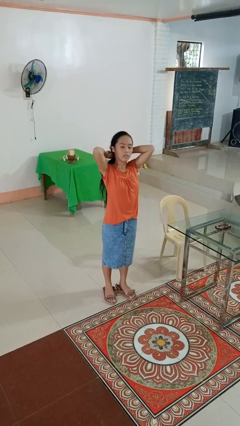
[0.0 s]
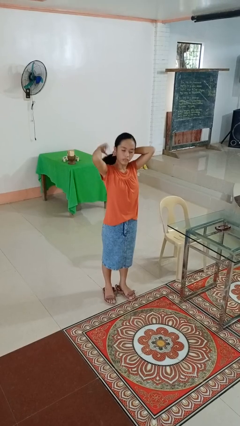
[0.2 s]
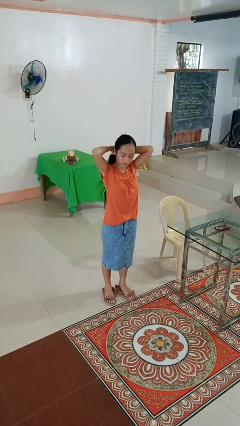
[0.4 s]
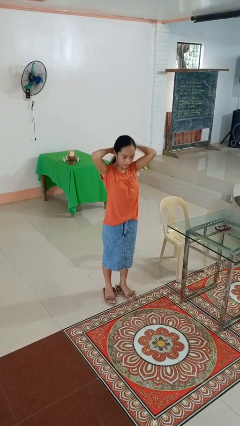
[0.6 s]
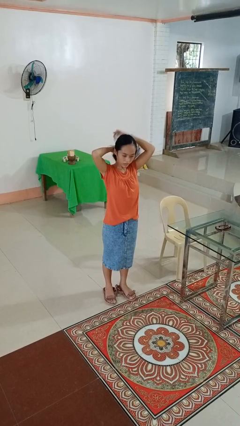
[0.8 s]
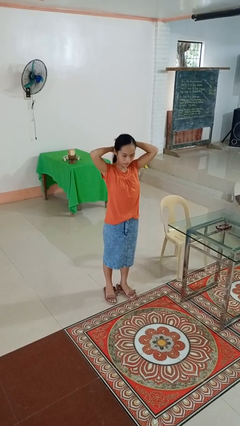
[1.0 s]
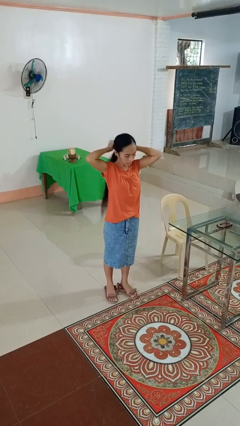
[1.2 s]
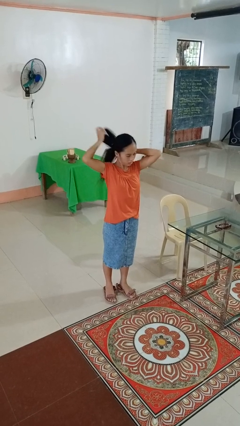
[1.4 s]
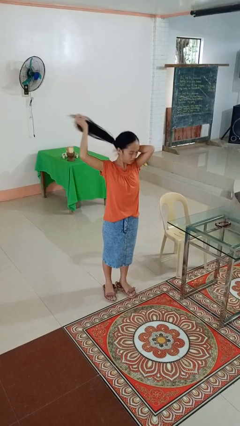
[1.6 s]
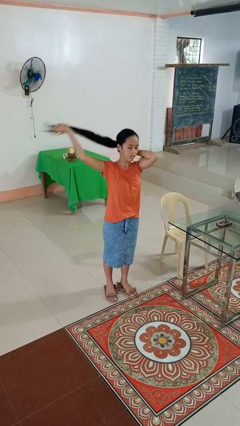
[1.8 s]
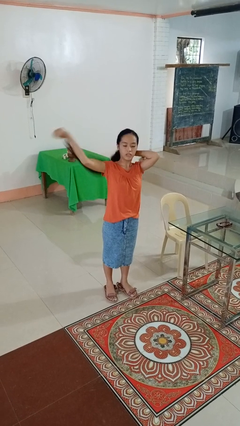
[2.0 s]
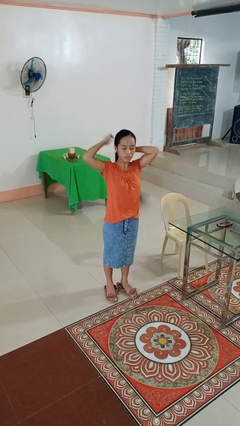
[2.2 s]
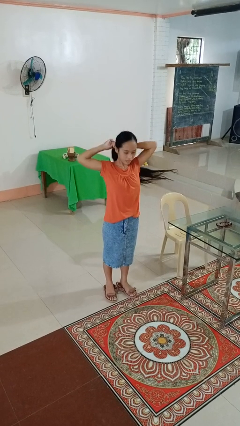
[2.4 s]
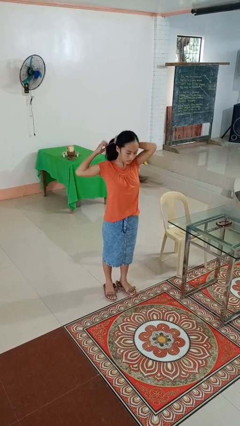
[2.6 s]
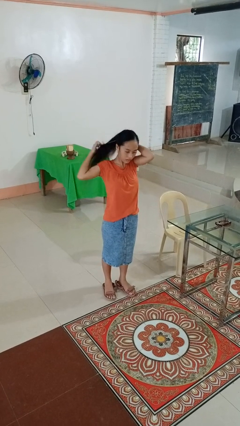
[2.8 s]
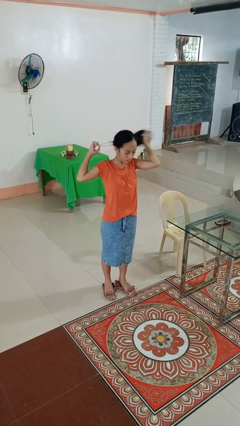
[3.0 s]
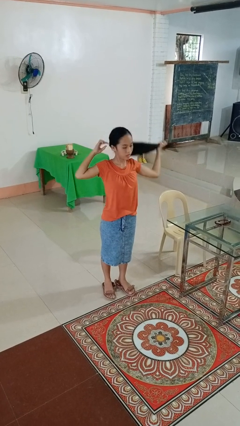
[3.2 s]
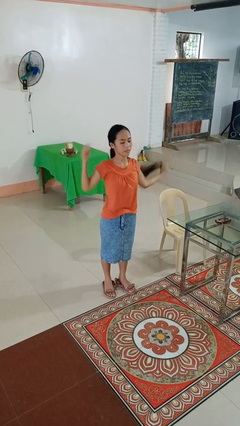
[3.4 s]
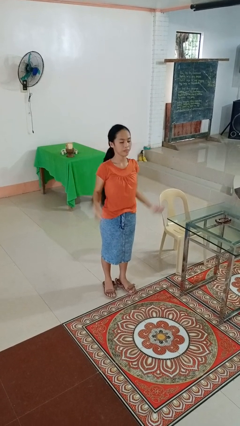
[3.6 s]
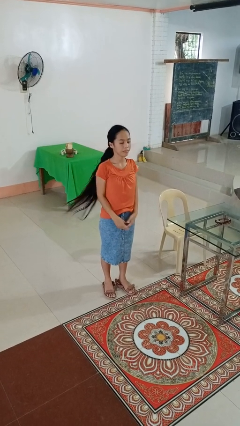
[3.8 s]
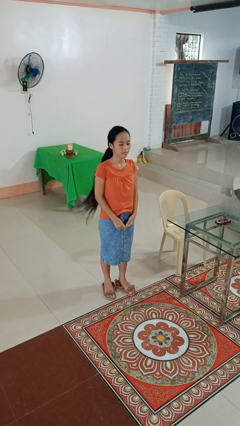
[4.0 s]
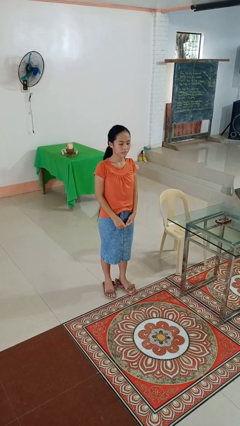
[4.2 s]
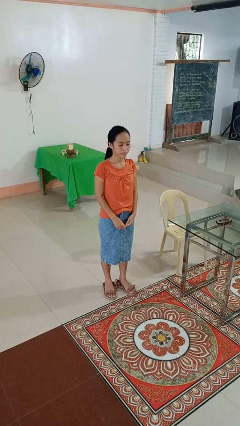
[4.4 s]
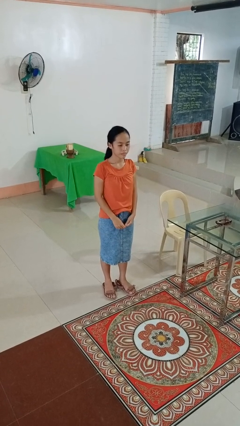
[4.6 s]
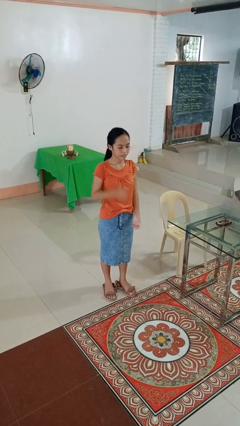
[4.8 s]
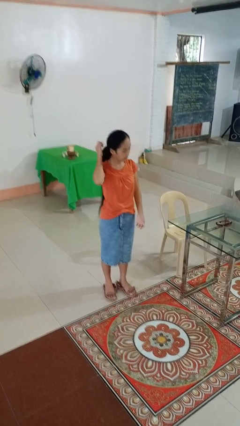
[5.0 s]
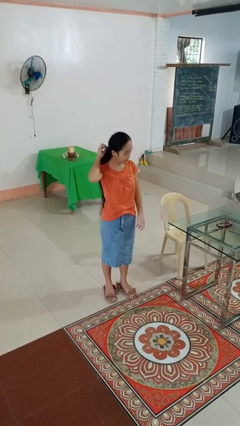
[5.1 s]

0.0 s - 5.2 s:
person puts hair in ponytail

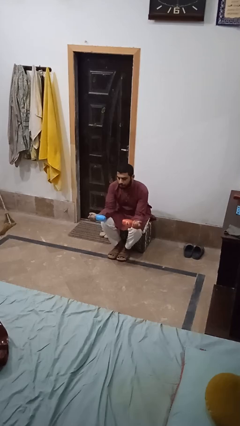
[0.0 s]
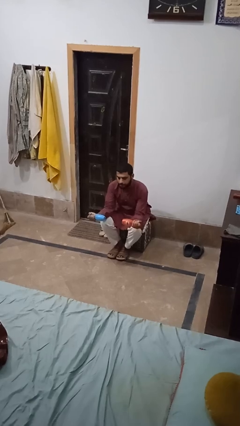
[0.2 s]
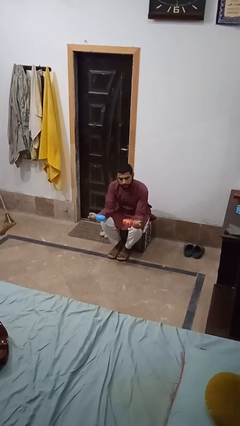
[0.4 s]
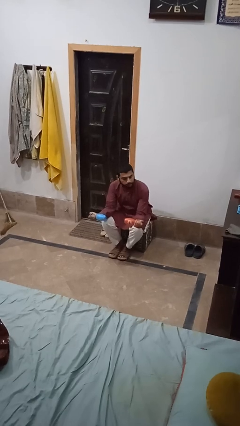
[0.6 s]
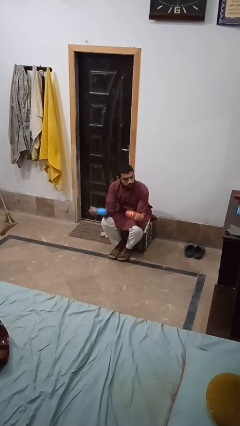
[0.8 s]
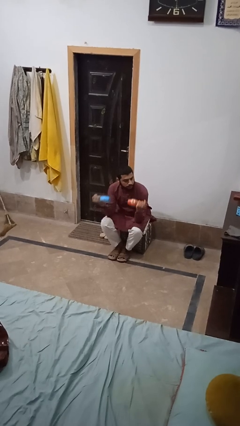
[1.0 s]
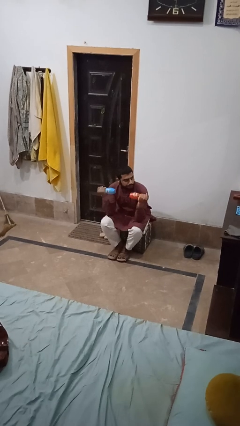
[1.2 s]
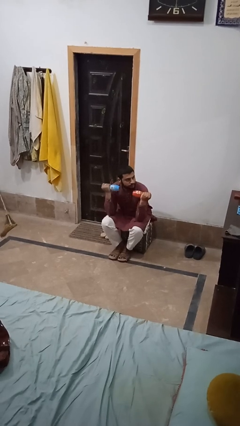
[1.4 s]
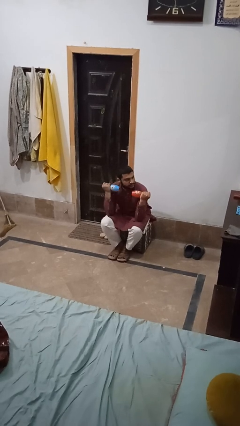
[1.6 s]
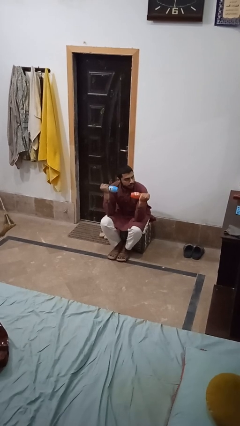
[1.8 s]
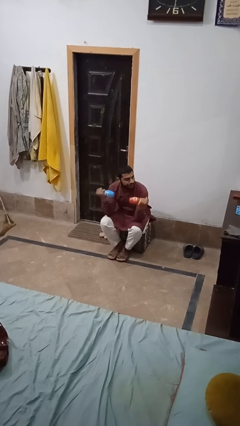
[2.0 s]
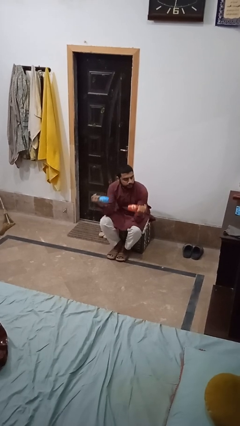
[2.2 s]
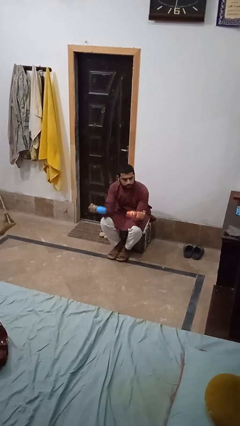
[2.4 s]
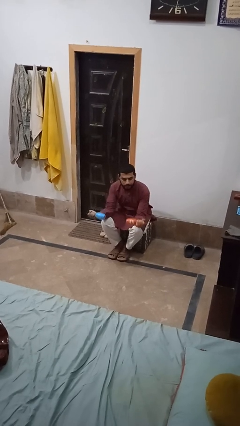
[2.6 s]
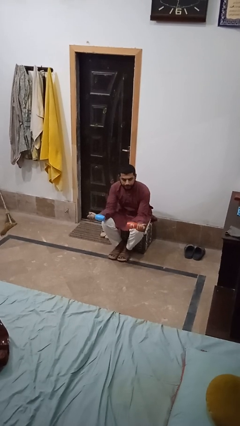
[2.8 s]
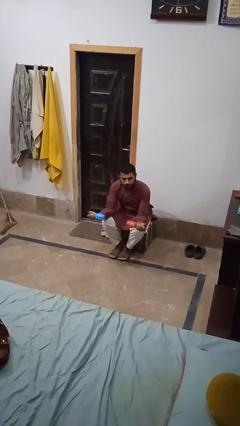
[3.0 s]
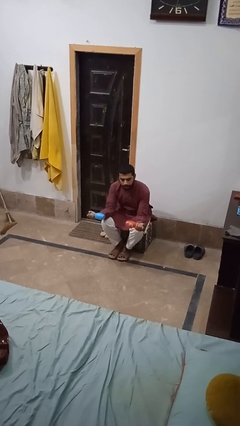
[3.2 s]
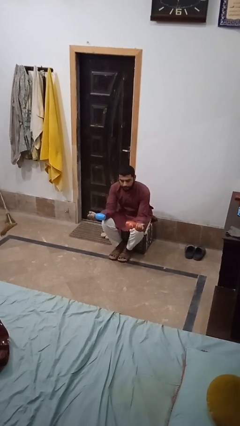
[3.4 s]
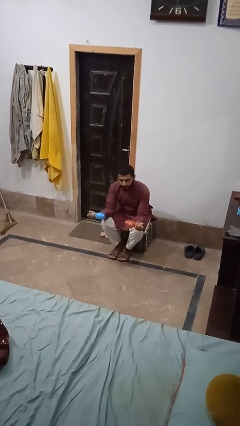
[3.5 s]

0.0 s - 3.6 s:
person lifts dumbbells

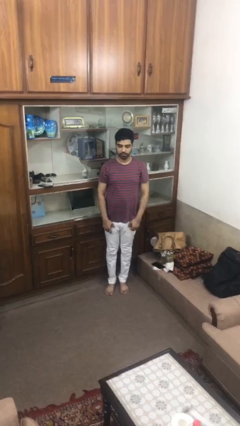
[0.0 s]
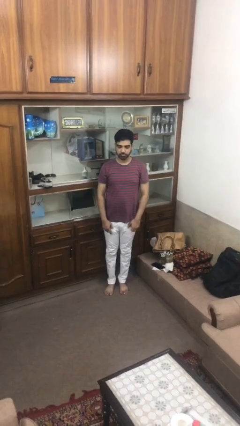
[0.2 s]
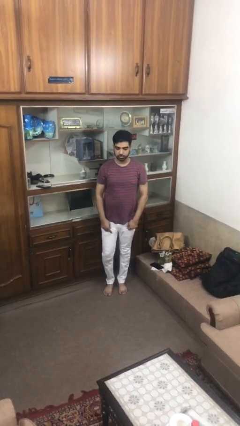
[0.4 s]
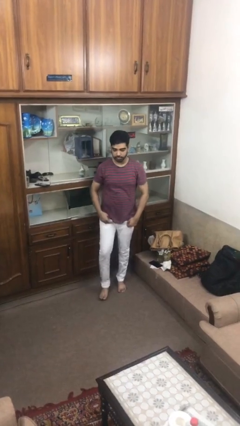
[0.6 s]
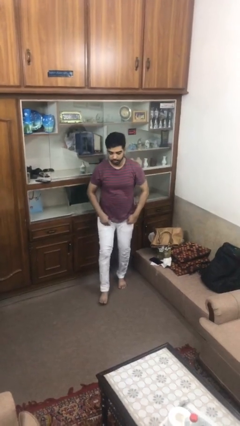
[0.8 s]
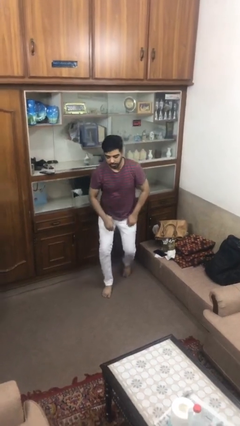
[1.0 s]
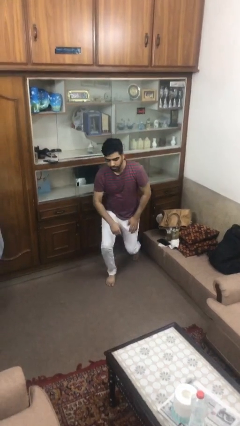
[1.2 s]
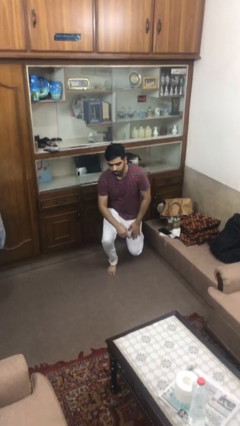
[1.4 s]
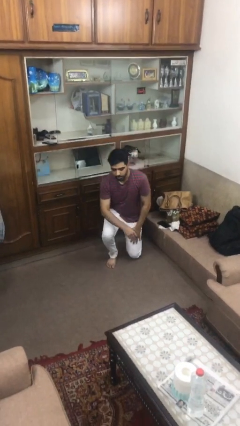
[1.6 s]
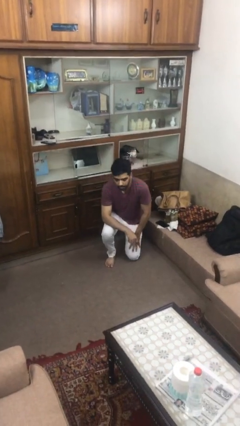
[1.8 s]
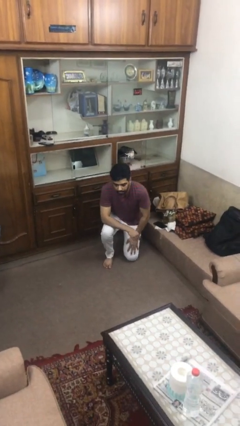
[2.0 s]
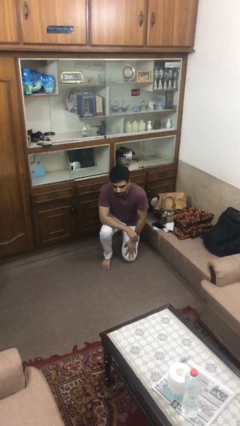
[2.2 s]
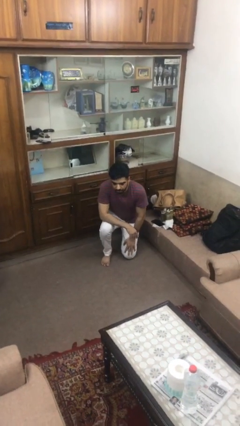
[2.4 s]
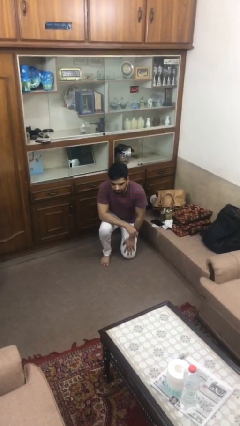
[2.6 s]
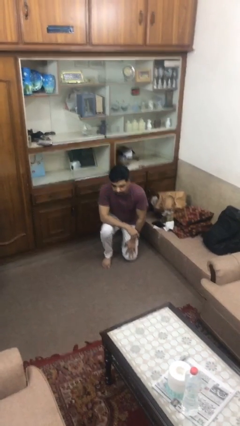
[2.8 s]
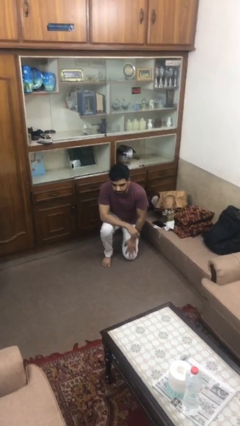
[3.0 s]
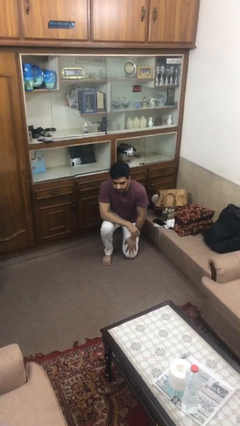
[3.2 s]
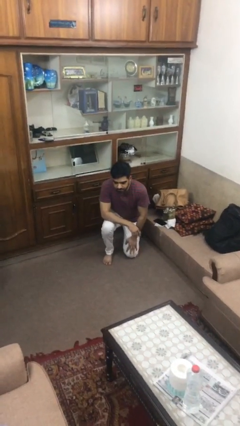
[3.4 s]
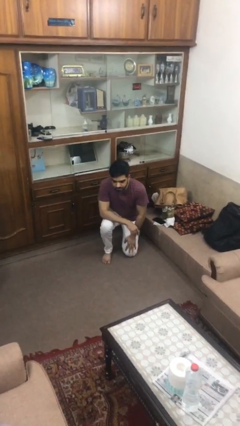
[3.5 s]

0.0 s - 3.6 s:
person kneels

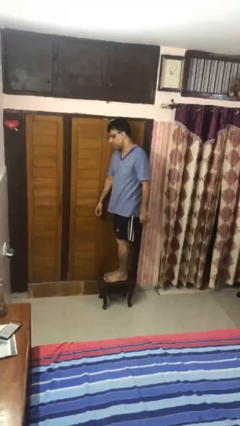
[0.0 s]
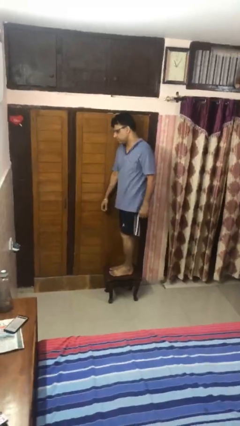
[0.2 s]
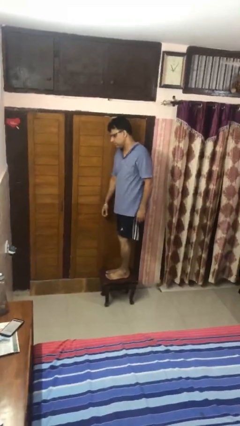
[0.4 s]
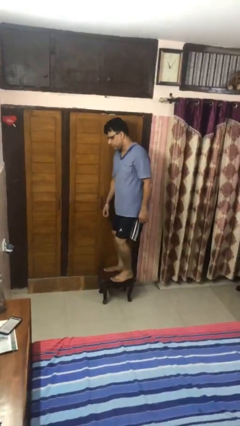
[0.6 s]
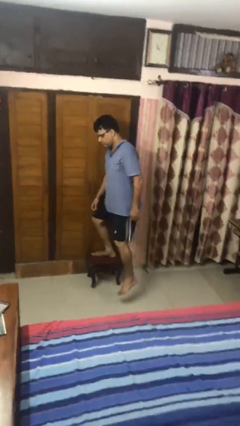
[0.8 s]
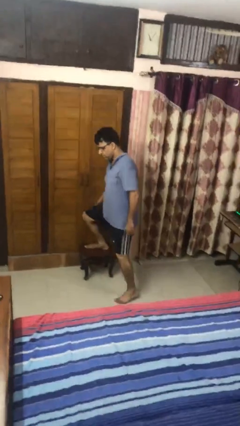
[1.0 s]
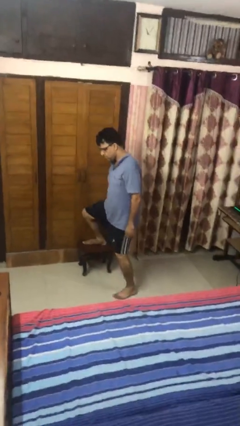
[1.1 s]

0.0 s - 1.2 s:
person climbs off table

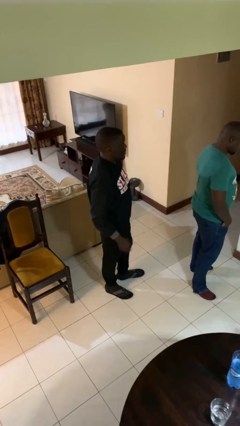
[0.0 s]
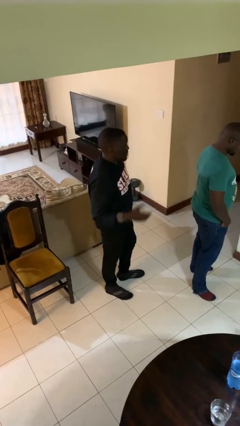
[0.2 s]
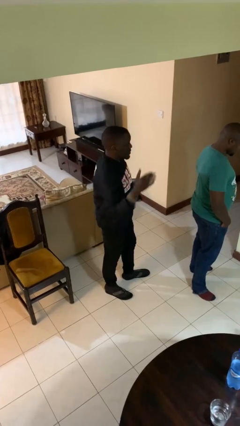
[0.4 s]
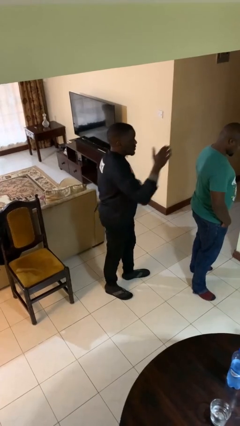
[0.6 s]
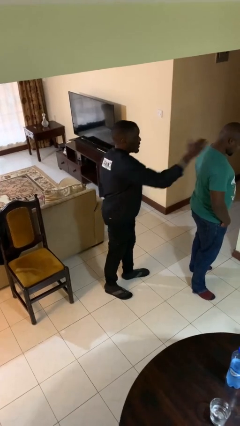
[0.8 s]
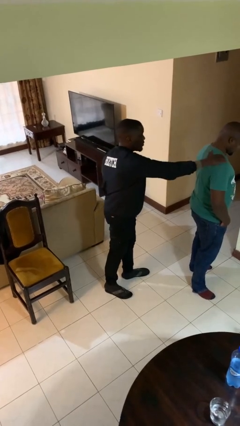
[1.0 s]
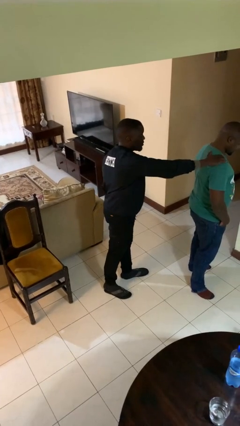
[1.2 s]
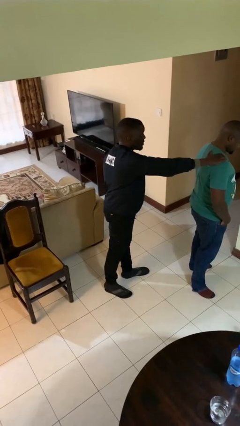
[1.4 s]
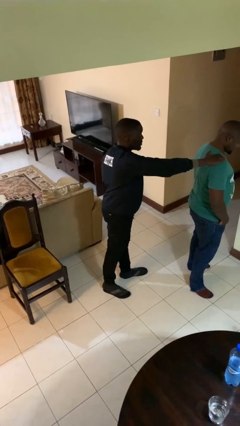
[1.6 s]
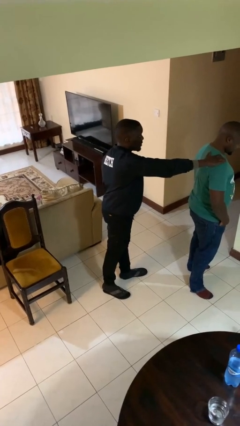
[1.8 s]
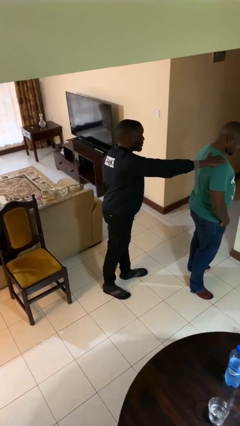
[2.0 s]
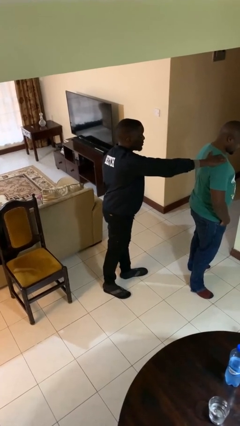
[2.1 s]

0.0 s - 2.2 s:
person grabs person by shoulder

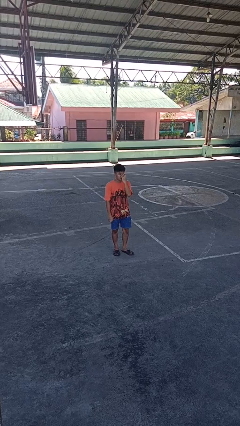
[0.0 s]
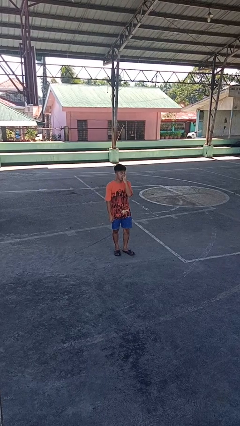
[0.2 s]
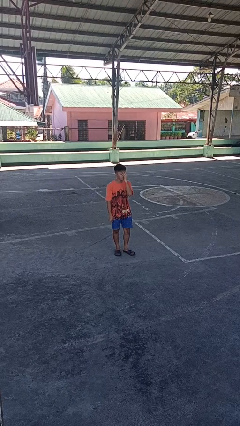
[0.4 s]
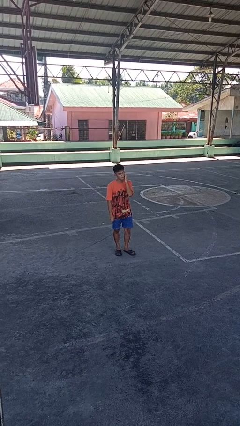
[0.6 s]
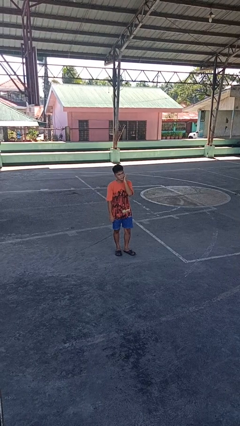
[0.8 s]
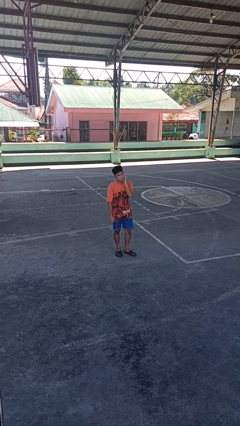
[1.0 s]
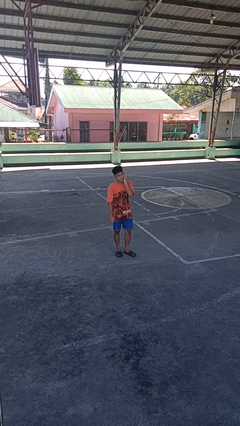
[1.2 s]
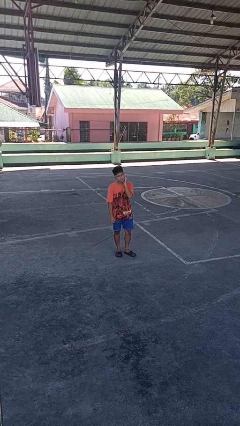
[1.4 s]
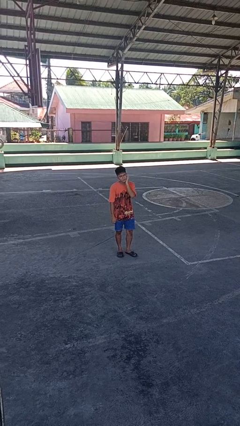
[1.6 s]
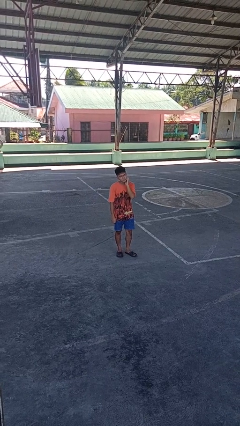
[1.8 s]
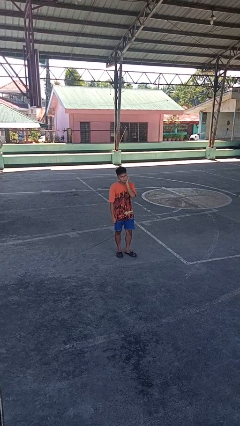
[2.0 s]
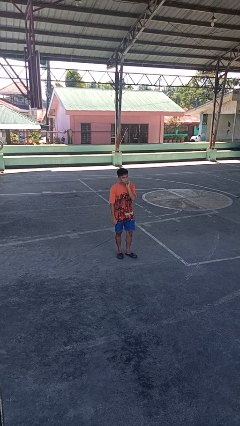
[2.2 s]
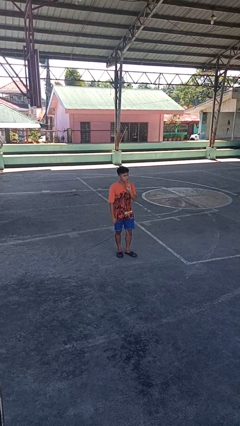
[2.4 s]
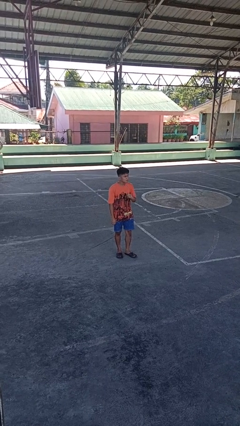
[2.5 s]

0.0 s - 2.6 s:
person scratches face
